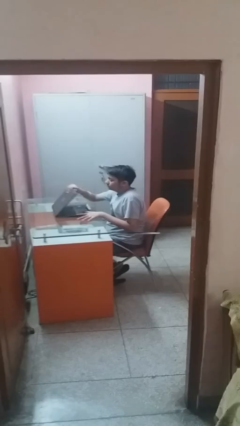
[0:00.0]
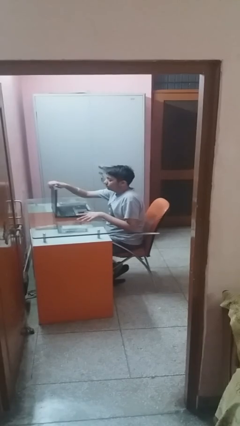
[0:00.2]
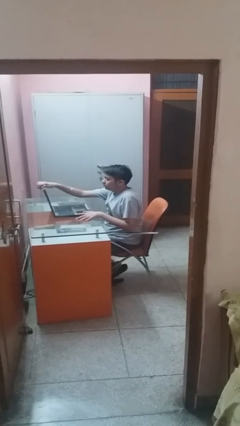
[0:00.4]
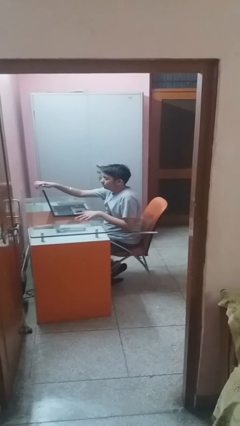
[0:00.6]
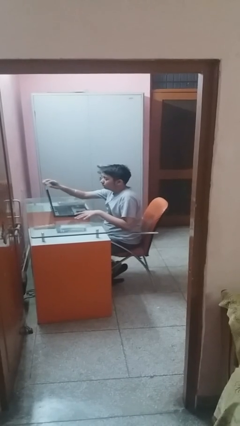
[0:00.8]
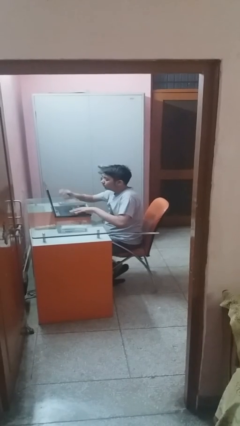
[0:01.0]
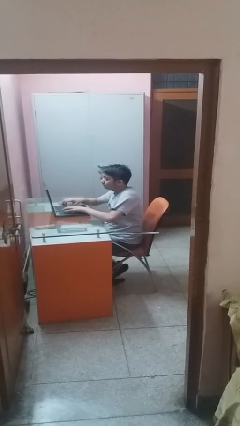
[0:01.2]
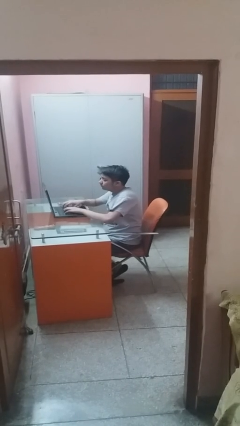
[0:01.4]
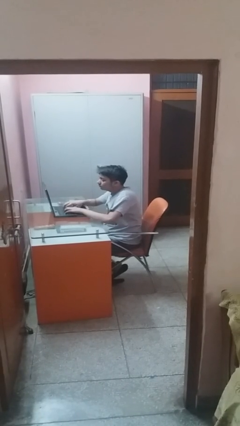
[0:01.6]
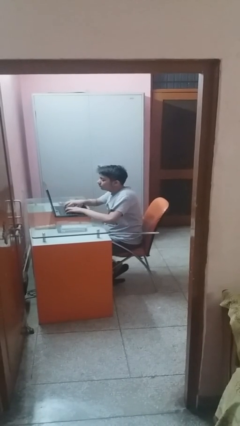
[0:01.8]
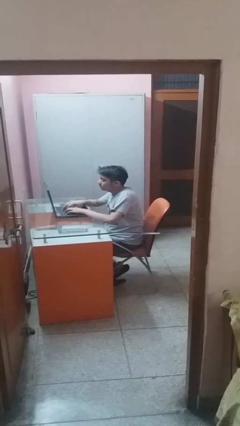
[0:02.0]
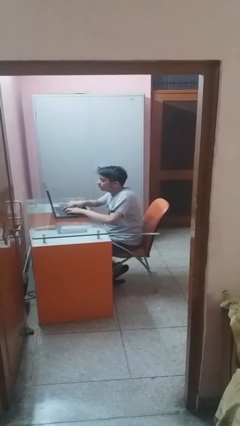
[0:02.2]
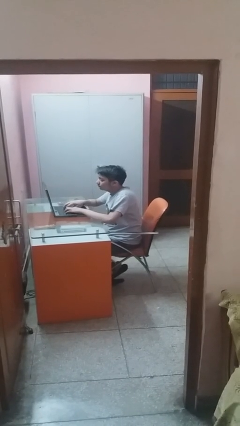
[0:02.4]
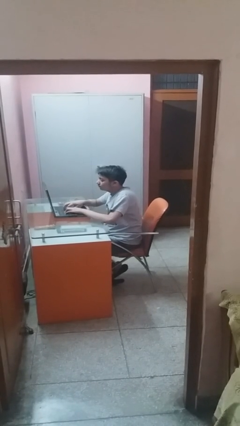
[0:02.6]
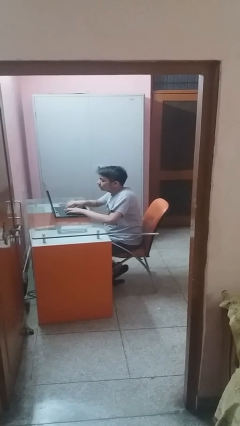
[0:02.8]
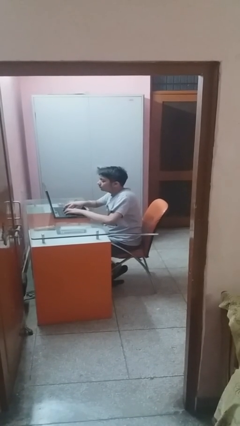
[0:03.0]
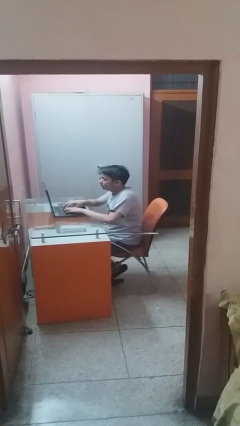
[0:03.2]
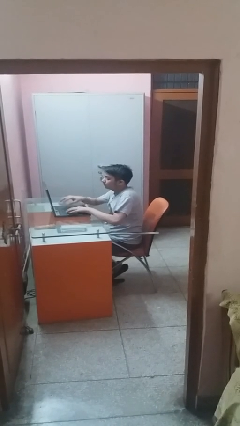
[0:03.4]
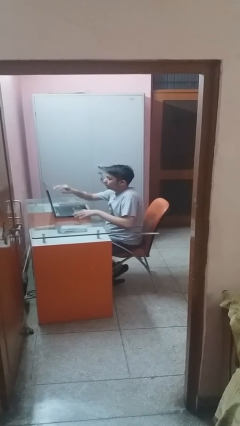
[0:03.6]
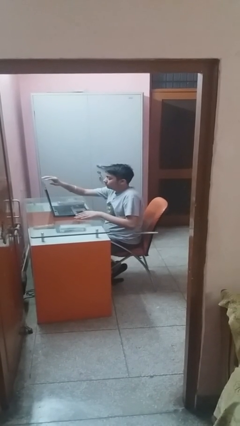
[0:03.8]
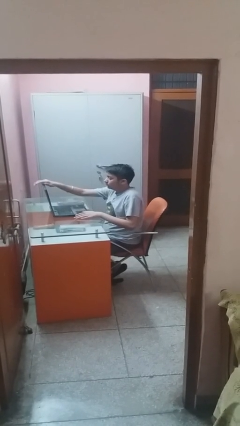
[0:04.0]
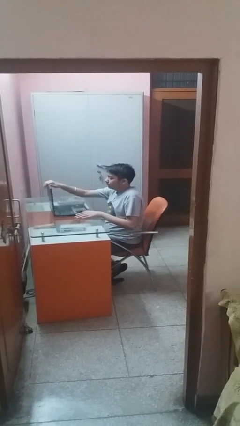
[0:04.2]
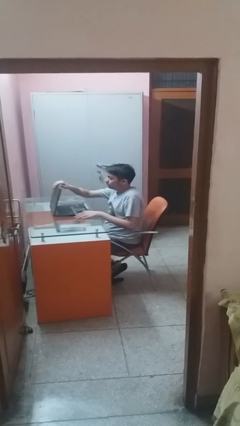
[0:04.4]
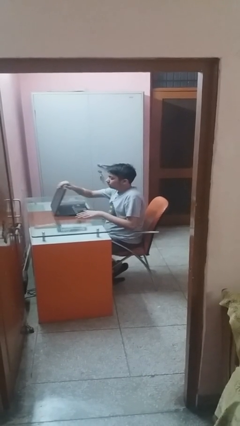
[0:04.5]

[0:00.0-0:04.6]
person interacts with laptop

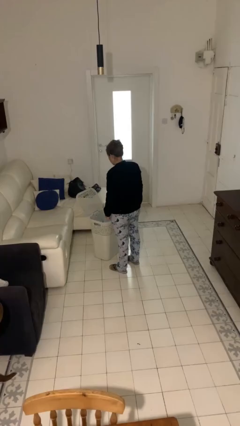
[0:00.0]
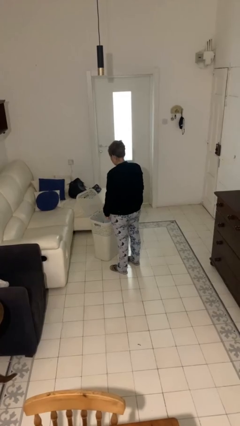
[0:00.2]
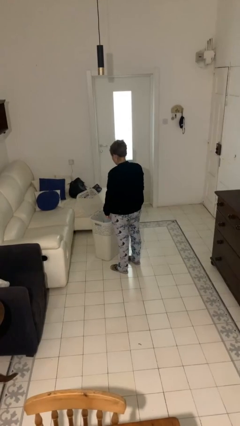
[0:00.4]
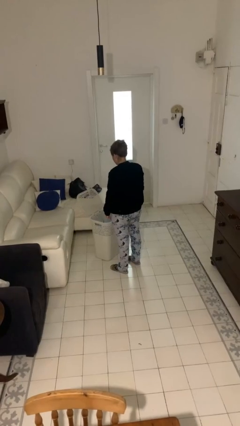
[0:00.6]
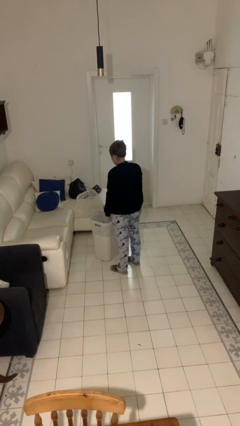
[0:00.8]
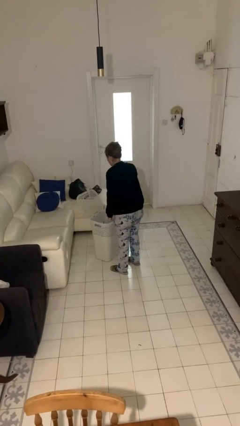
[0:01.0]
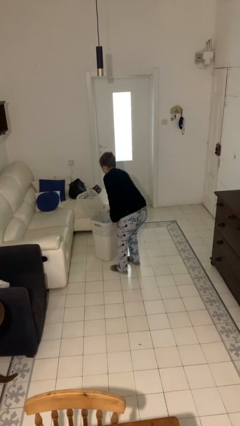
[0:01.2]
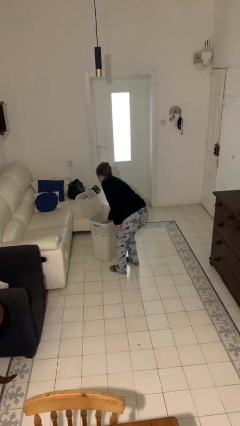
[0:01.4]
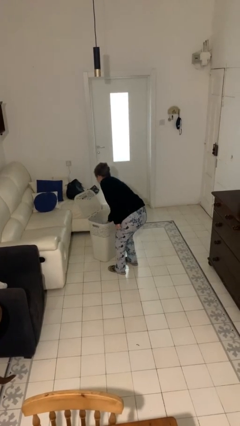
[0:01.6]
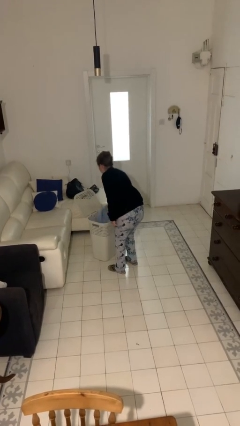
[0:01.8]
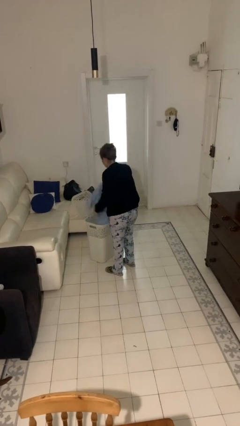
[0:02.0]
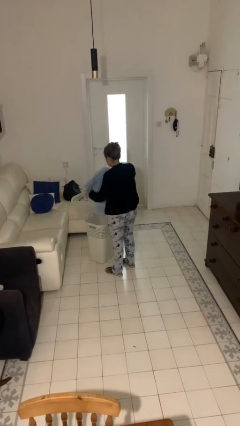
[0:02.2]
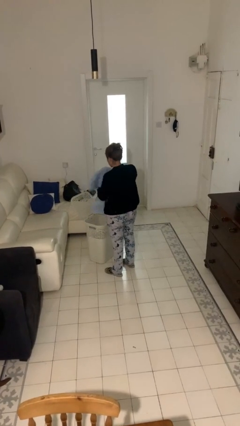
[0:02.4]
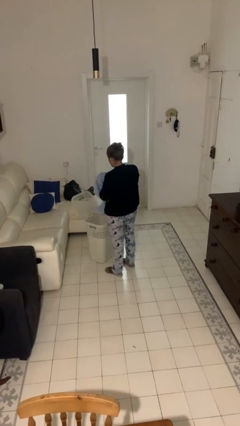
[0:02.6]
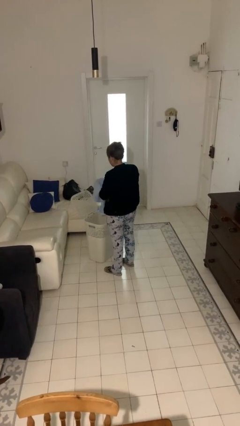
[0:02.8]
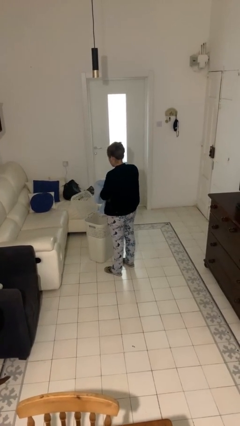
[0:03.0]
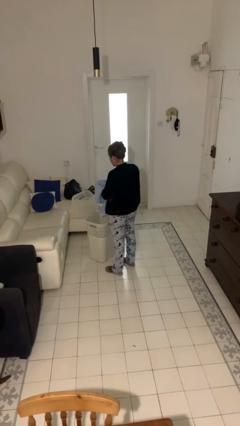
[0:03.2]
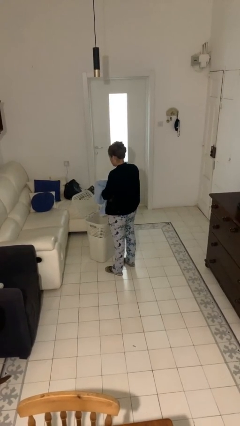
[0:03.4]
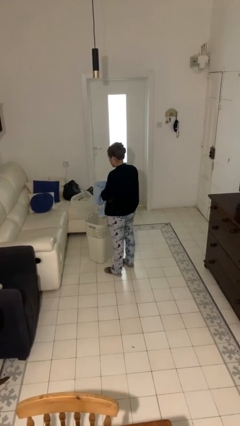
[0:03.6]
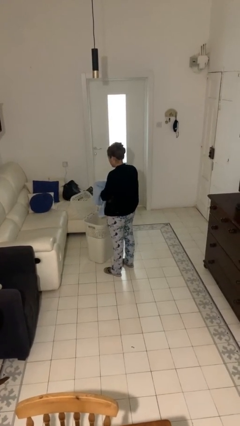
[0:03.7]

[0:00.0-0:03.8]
person takes object from basket

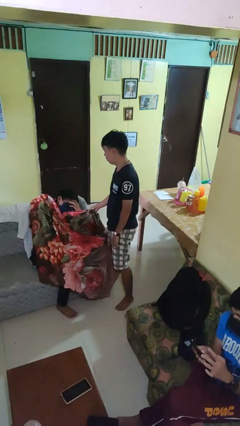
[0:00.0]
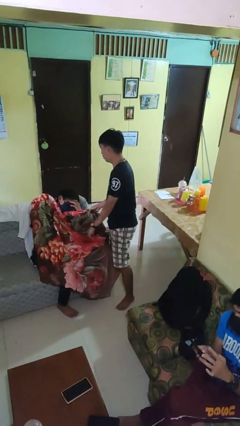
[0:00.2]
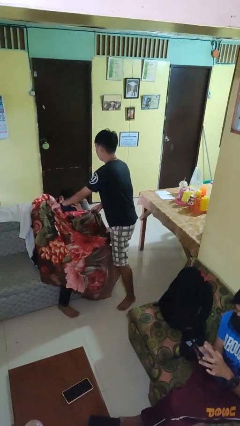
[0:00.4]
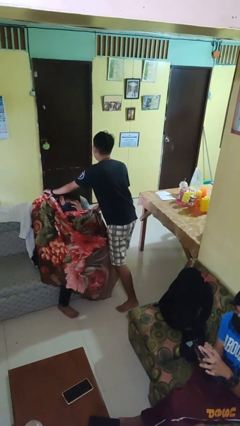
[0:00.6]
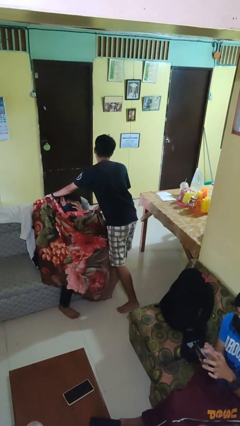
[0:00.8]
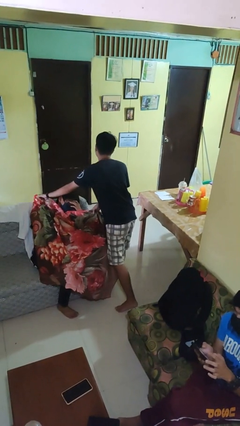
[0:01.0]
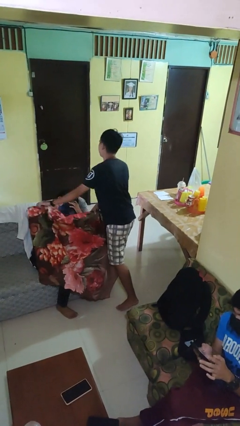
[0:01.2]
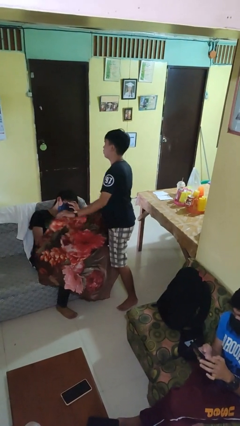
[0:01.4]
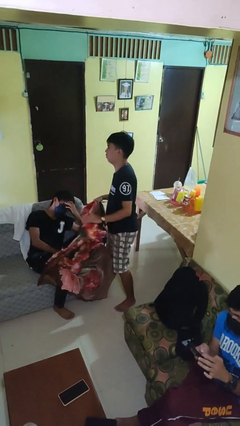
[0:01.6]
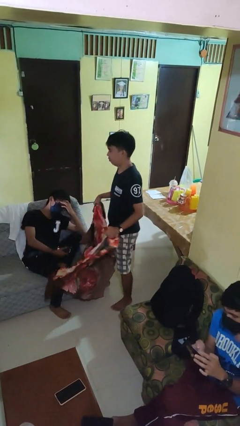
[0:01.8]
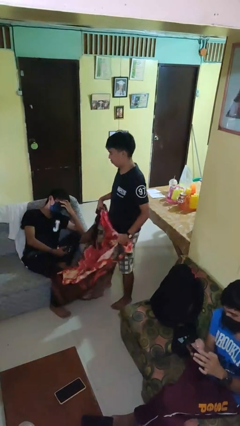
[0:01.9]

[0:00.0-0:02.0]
person uncovers friend with blanket

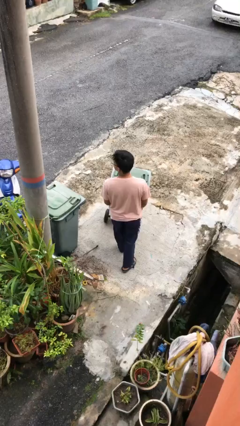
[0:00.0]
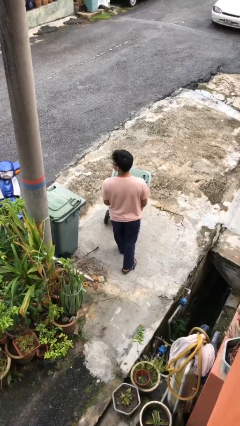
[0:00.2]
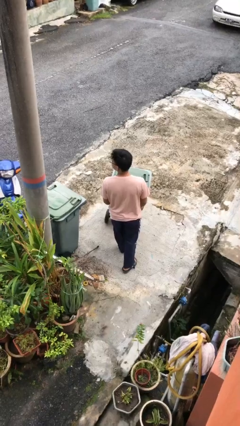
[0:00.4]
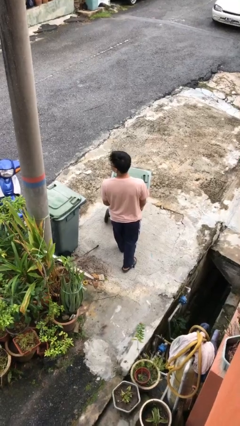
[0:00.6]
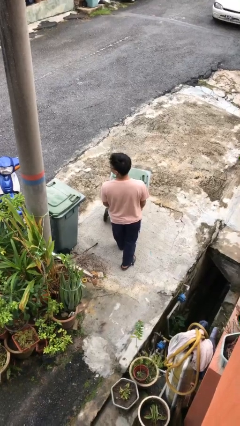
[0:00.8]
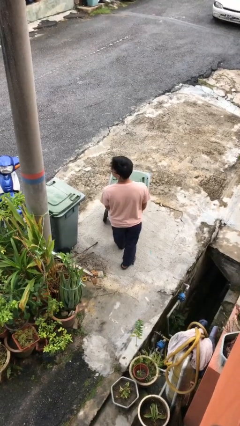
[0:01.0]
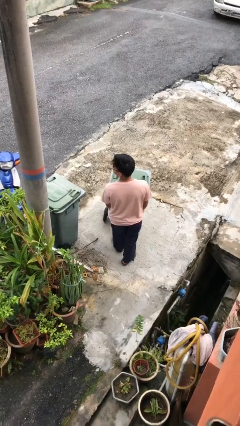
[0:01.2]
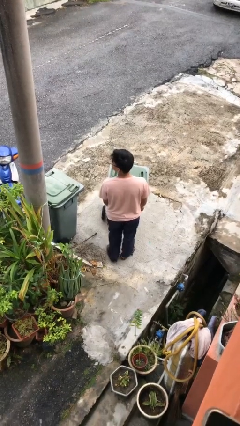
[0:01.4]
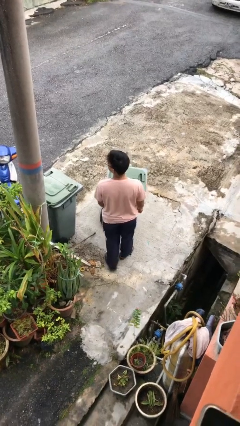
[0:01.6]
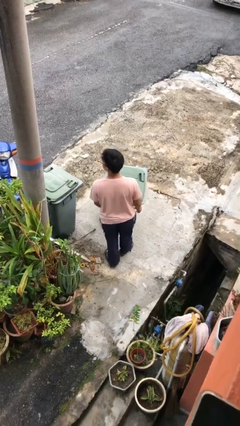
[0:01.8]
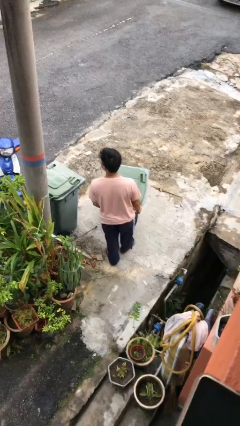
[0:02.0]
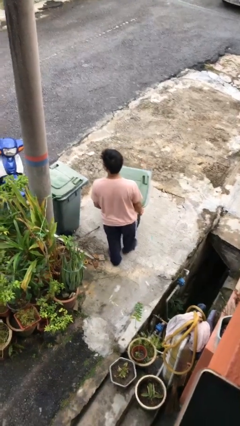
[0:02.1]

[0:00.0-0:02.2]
person pulls wheeled trashcan

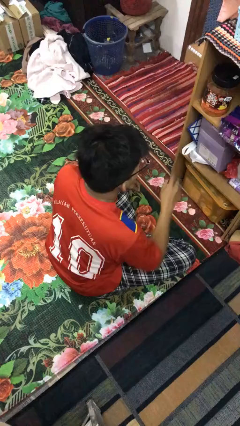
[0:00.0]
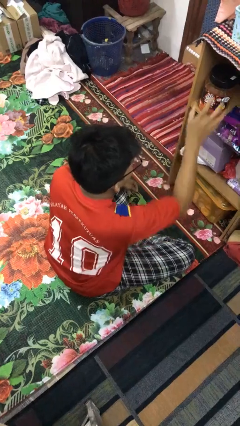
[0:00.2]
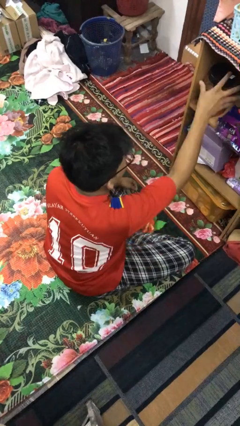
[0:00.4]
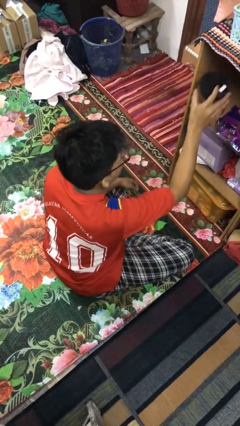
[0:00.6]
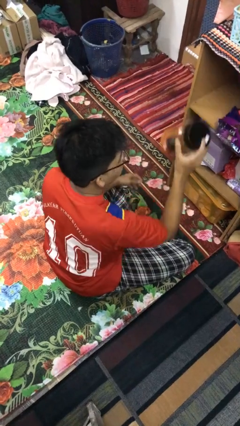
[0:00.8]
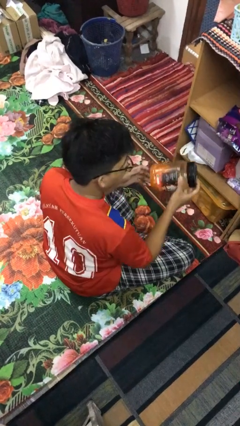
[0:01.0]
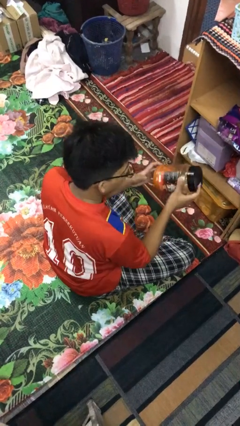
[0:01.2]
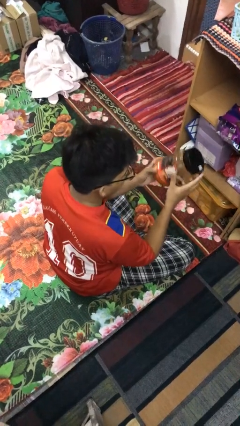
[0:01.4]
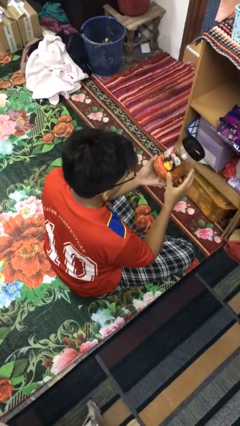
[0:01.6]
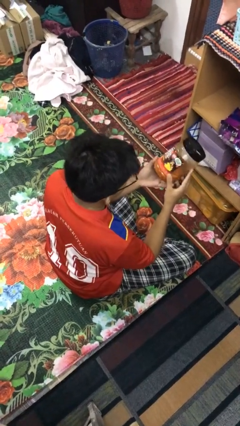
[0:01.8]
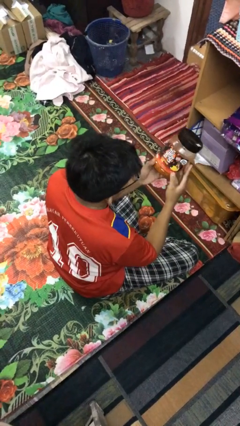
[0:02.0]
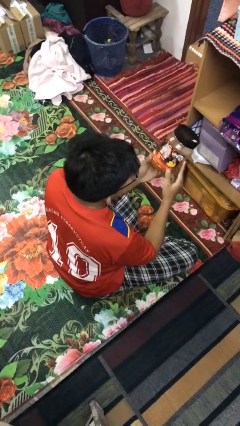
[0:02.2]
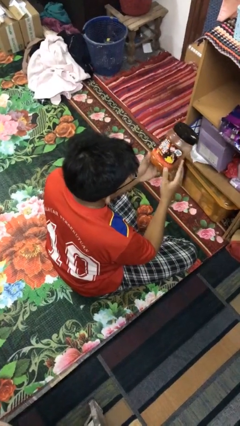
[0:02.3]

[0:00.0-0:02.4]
person picks up object from cabinet

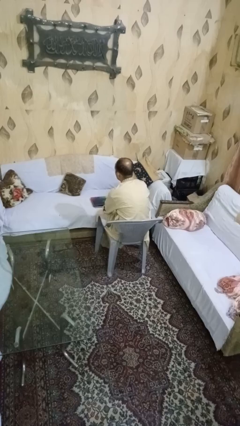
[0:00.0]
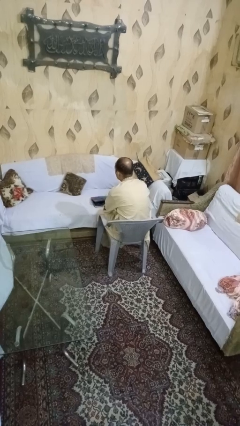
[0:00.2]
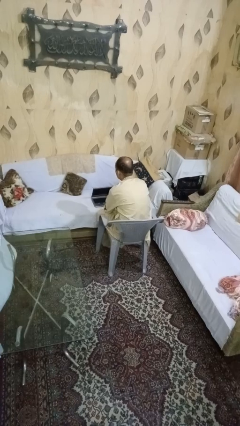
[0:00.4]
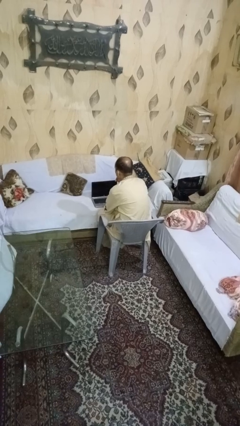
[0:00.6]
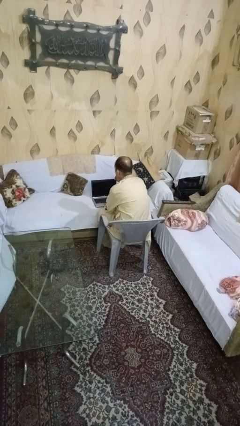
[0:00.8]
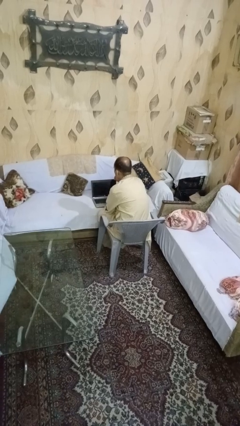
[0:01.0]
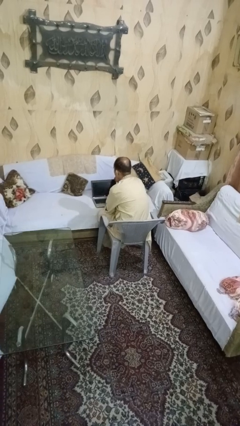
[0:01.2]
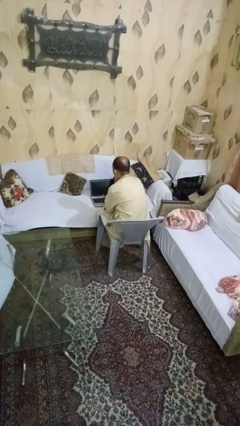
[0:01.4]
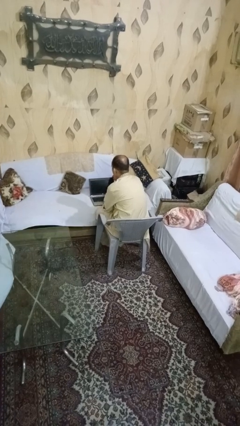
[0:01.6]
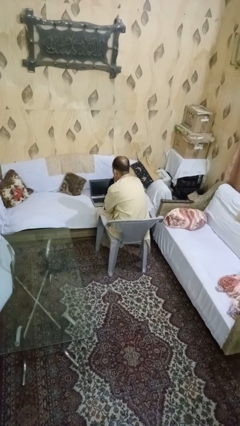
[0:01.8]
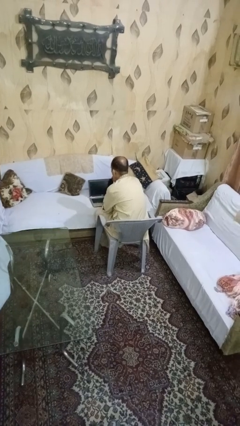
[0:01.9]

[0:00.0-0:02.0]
person opens laptop

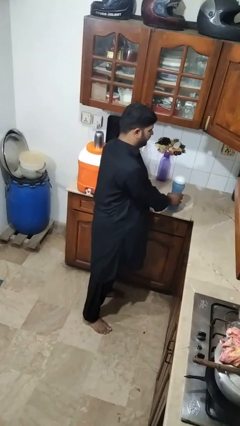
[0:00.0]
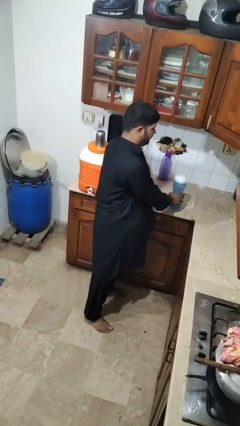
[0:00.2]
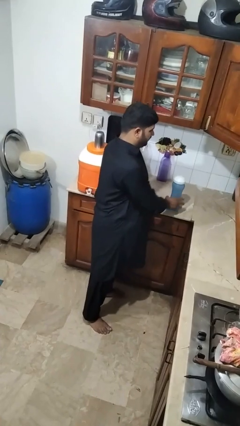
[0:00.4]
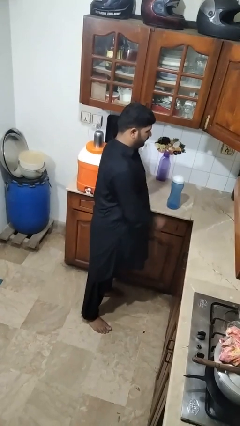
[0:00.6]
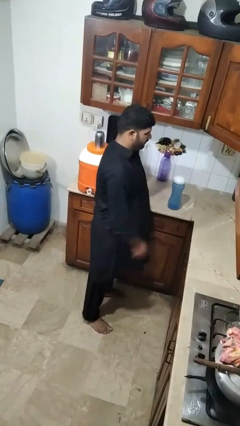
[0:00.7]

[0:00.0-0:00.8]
person puts down object on countertop
